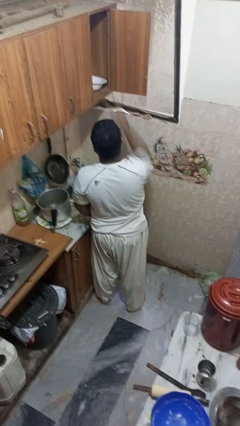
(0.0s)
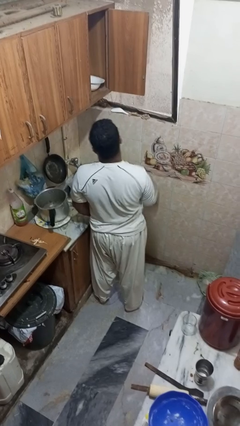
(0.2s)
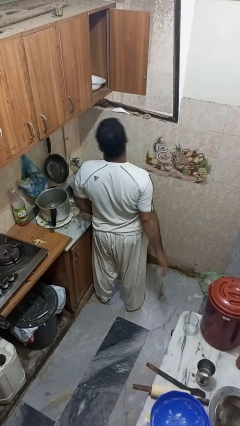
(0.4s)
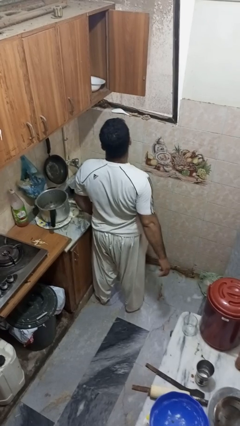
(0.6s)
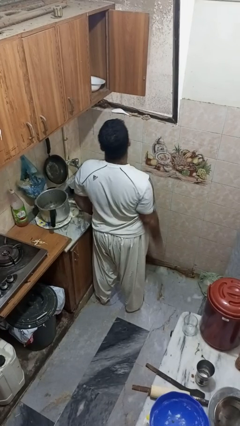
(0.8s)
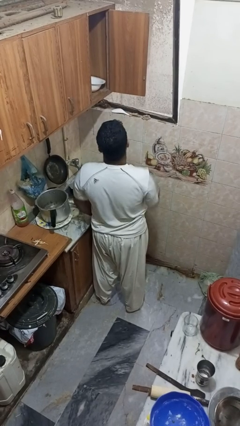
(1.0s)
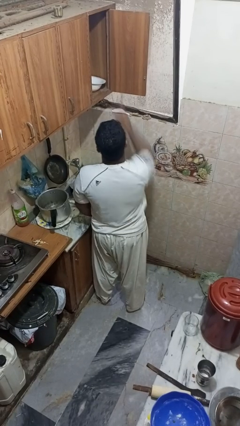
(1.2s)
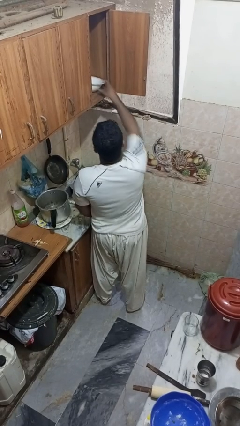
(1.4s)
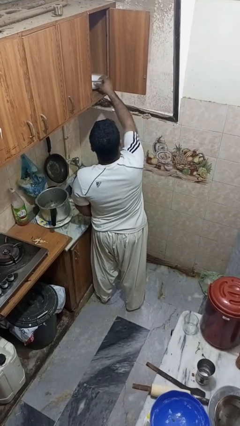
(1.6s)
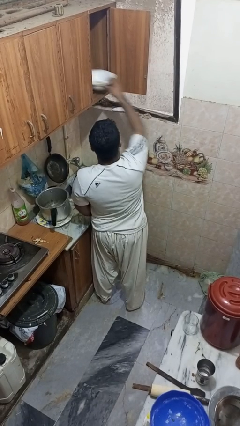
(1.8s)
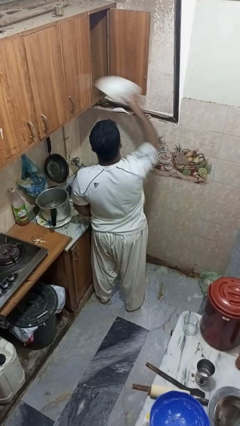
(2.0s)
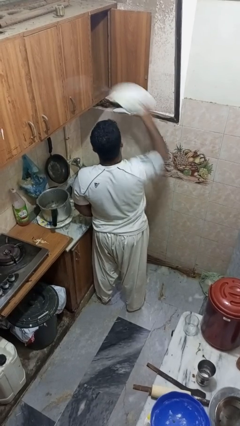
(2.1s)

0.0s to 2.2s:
person takes object from cabinet

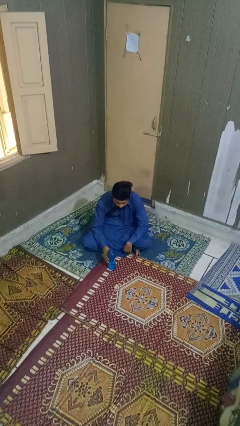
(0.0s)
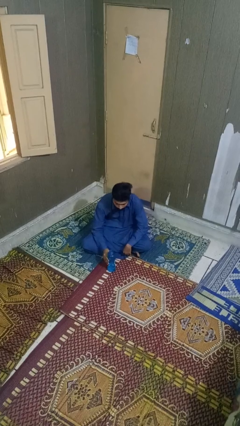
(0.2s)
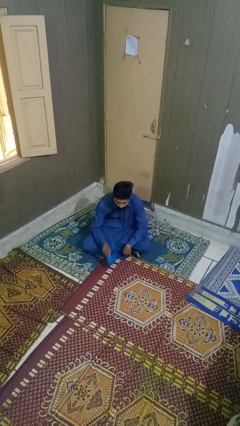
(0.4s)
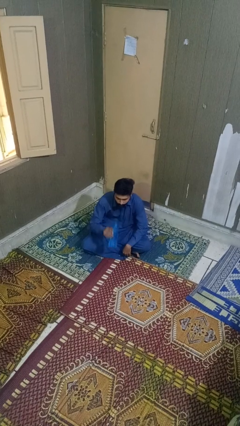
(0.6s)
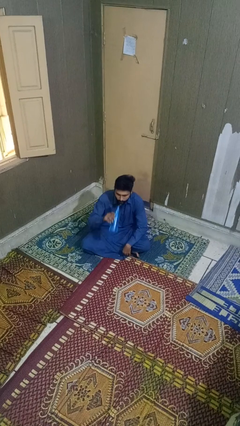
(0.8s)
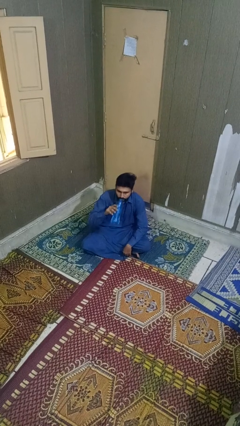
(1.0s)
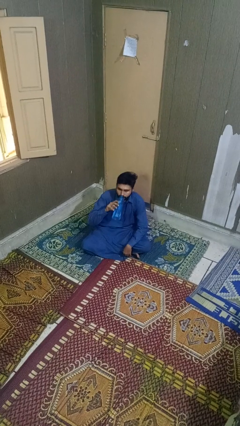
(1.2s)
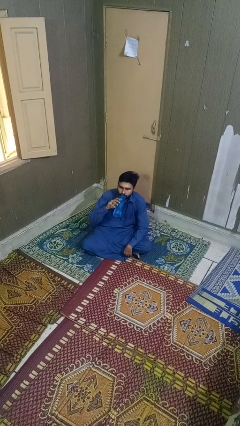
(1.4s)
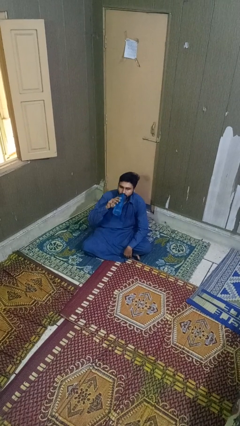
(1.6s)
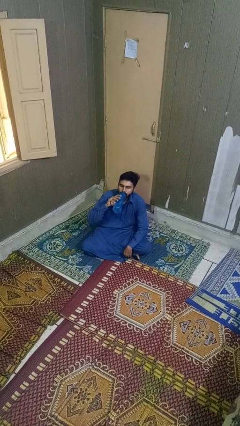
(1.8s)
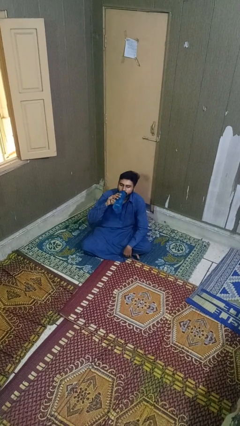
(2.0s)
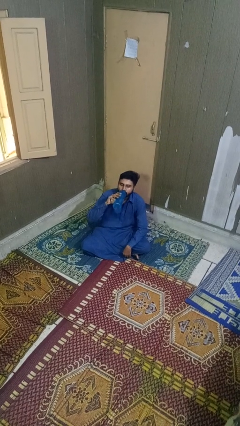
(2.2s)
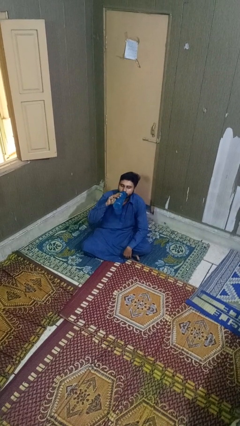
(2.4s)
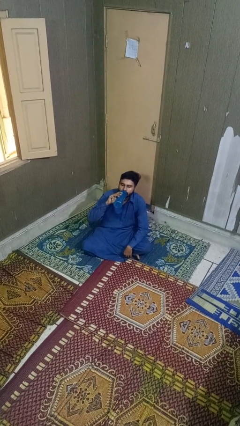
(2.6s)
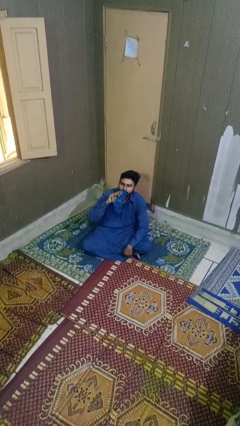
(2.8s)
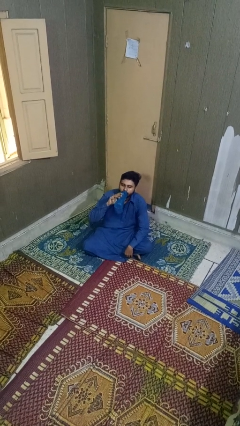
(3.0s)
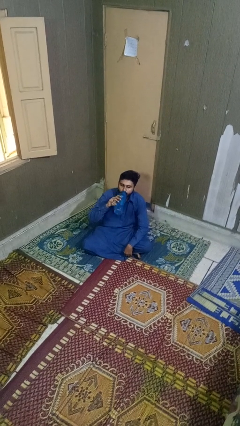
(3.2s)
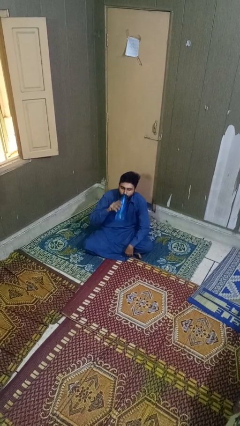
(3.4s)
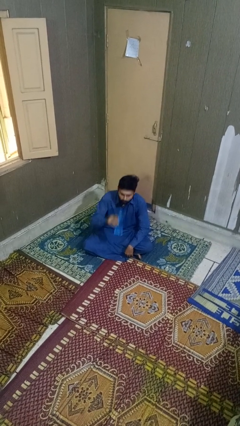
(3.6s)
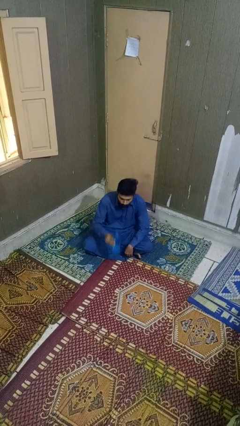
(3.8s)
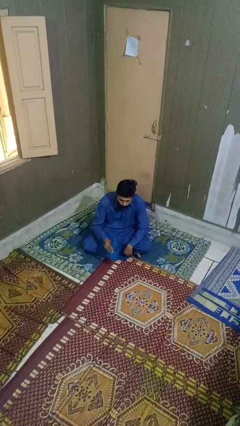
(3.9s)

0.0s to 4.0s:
person drinks from bottle

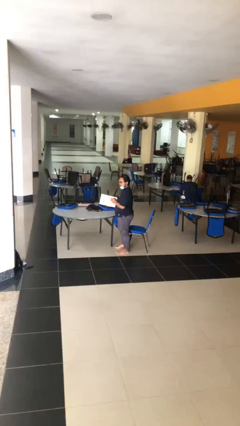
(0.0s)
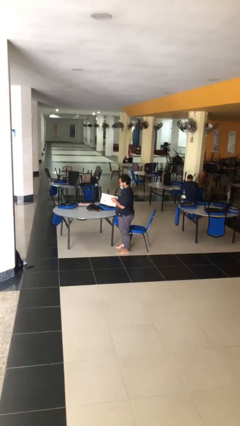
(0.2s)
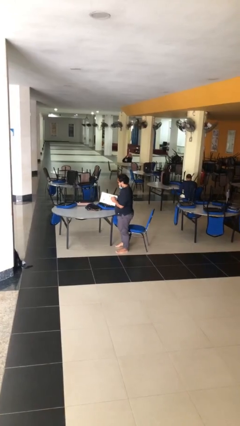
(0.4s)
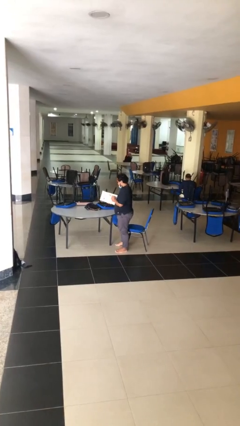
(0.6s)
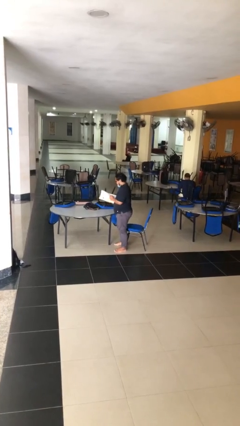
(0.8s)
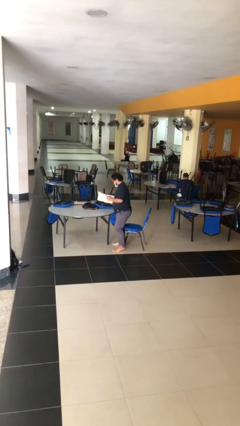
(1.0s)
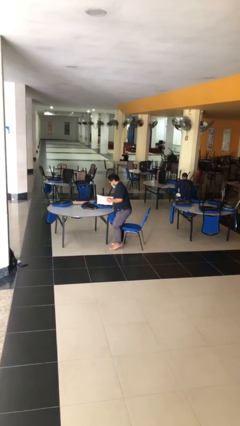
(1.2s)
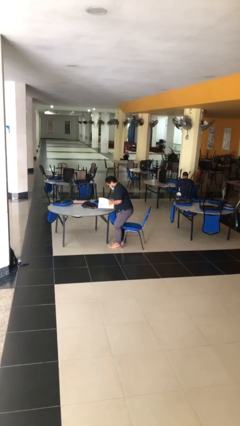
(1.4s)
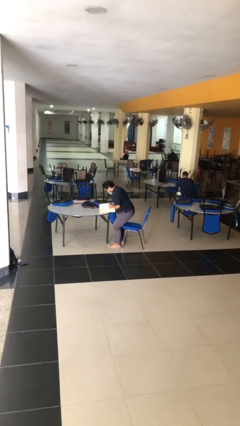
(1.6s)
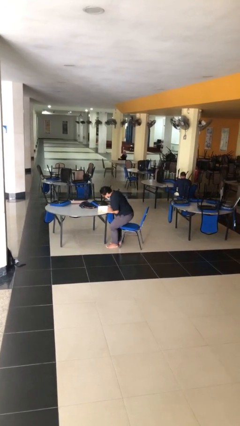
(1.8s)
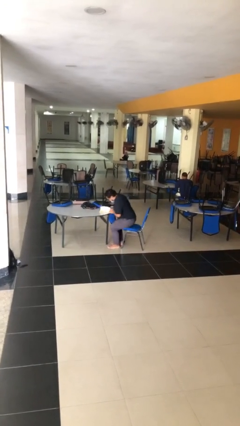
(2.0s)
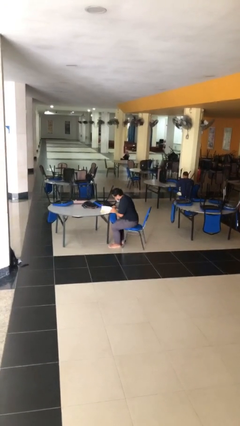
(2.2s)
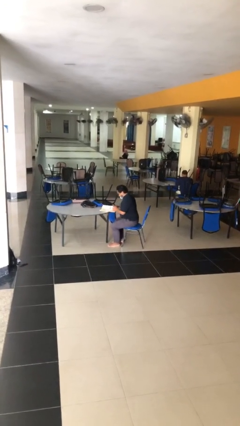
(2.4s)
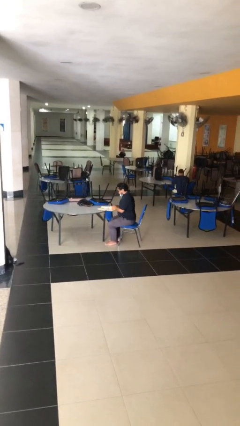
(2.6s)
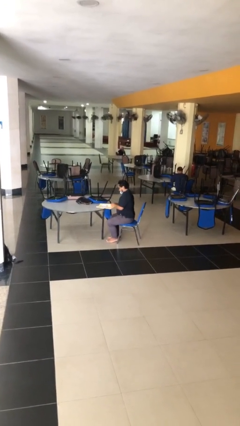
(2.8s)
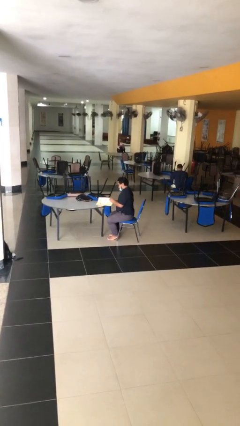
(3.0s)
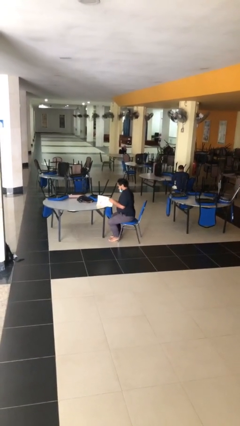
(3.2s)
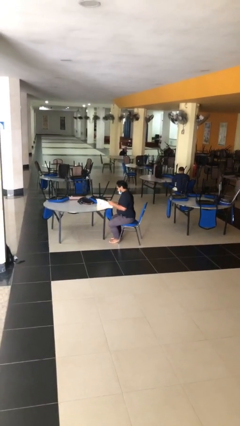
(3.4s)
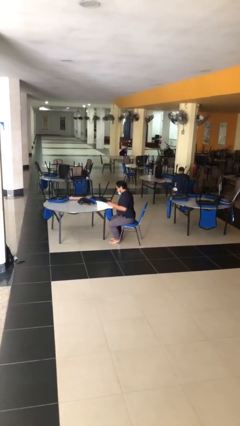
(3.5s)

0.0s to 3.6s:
person sits down

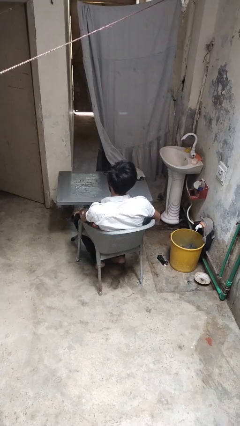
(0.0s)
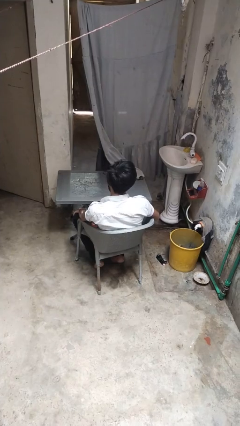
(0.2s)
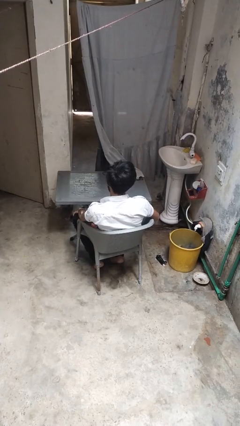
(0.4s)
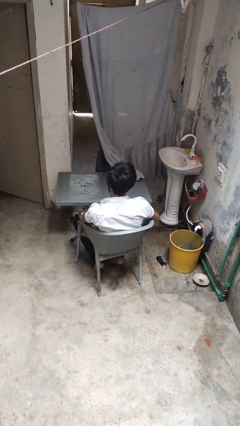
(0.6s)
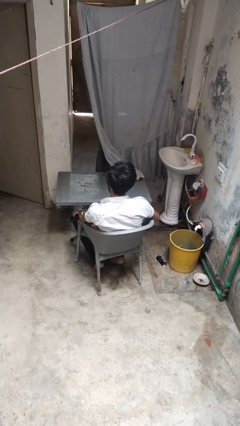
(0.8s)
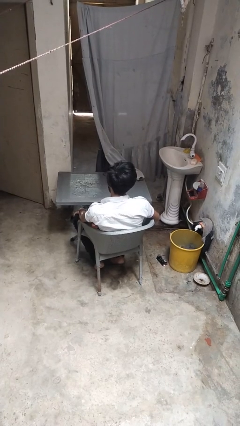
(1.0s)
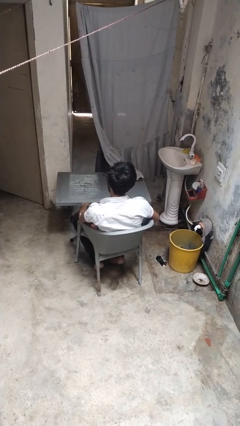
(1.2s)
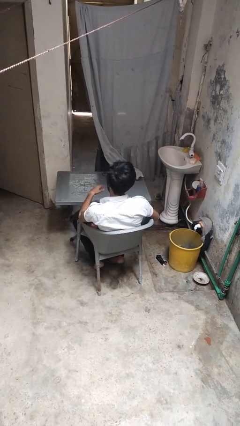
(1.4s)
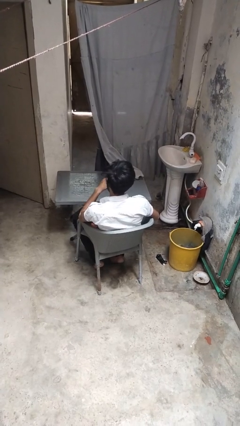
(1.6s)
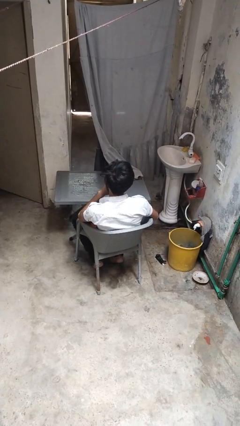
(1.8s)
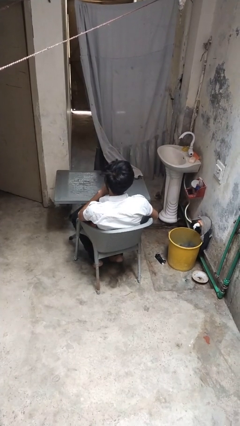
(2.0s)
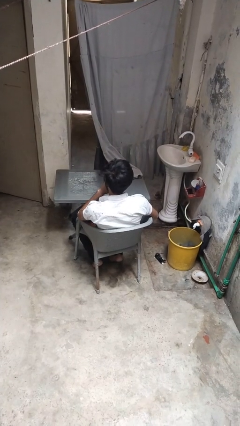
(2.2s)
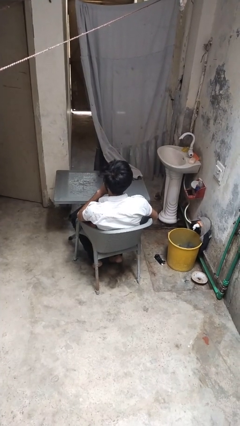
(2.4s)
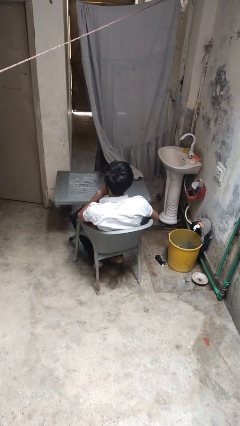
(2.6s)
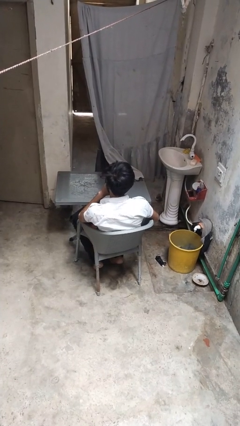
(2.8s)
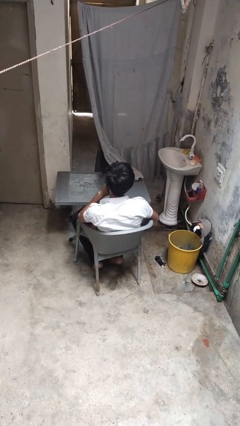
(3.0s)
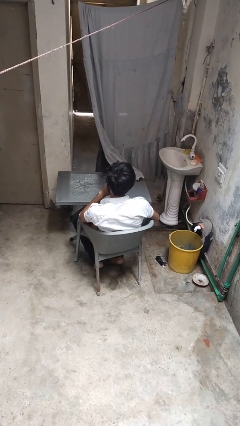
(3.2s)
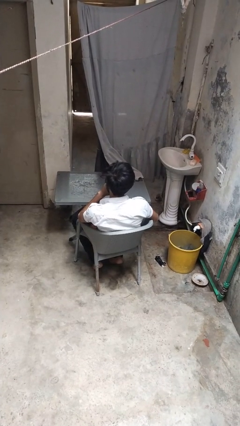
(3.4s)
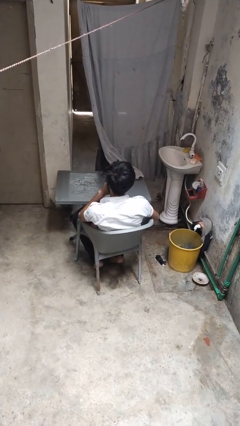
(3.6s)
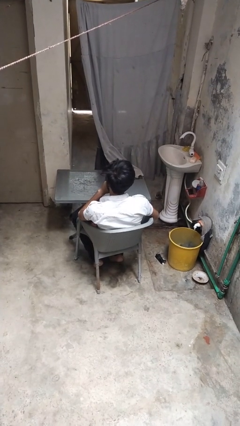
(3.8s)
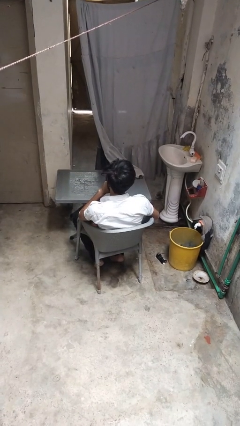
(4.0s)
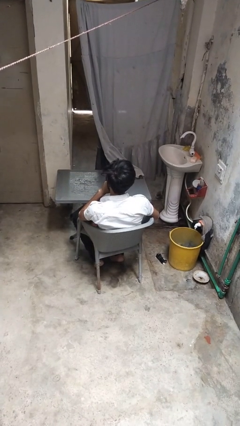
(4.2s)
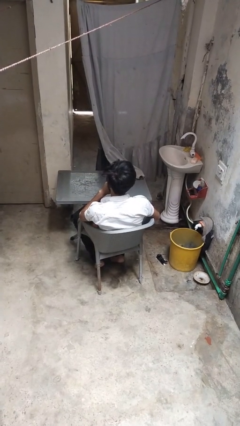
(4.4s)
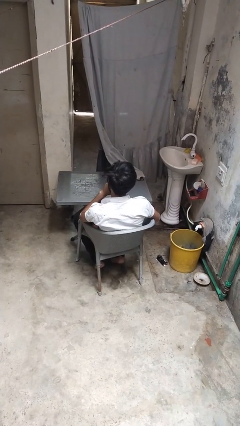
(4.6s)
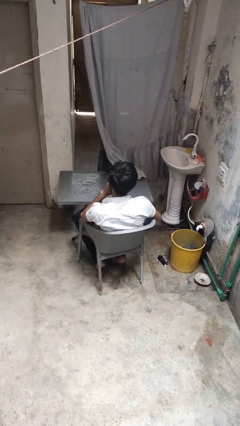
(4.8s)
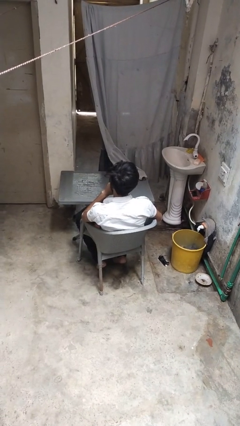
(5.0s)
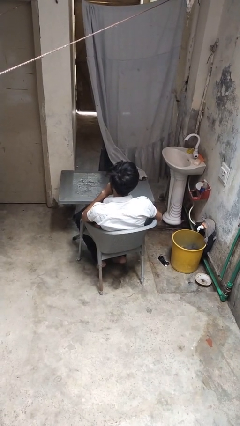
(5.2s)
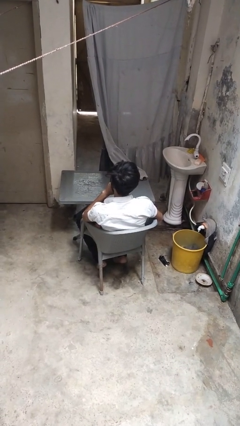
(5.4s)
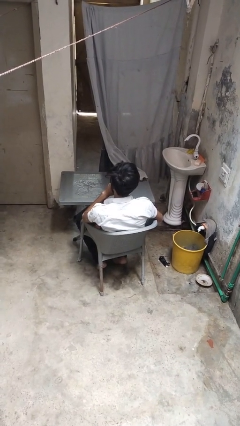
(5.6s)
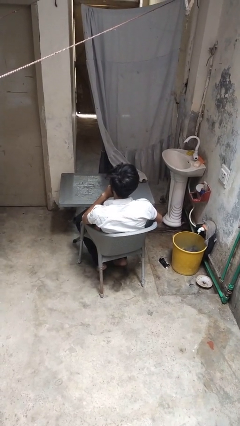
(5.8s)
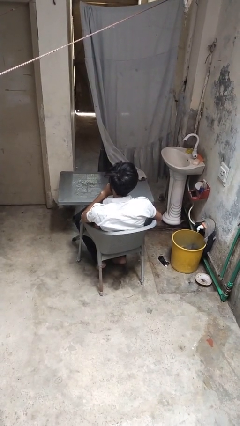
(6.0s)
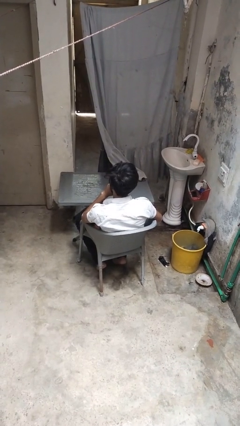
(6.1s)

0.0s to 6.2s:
person licks fingers

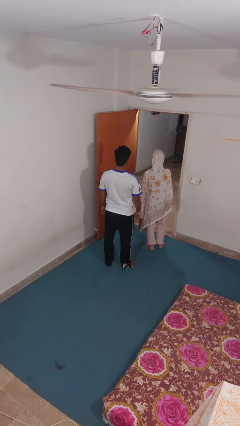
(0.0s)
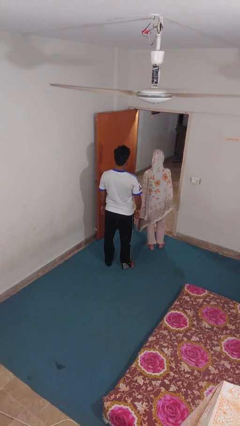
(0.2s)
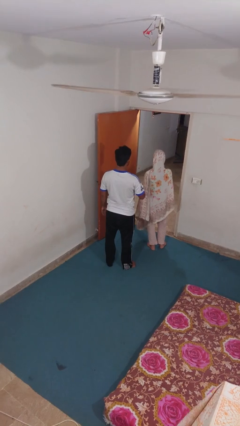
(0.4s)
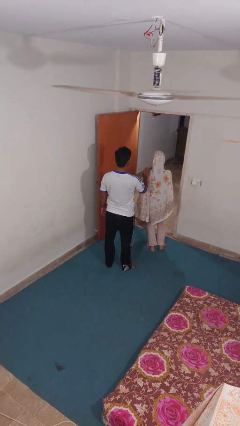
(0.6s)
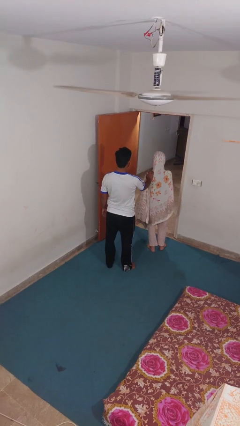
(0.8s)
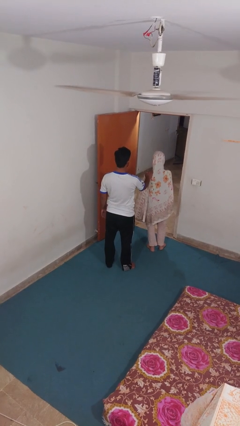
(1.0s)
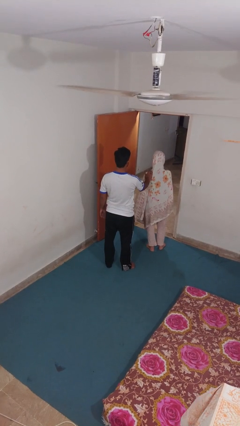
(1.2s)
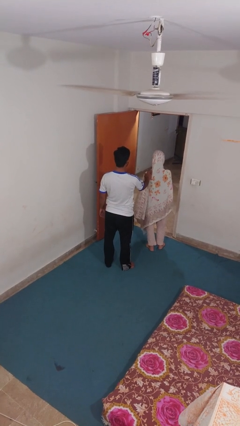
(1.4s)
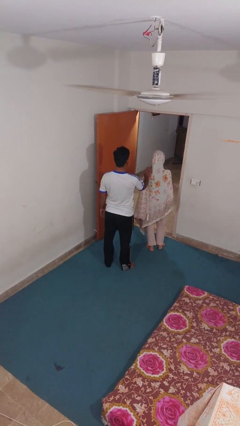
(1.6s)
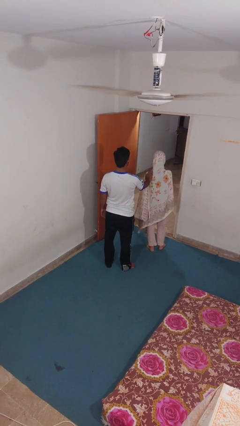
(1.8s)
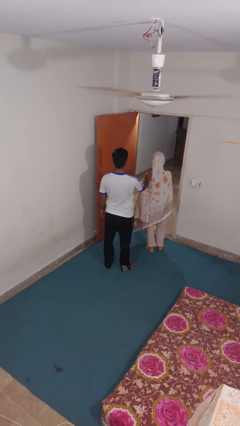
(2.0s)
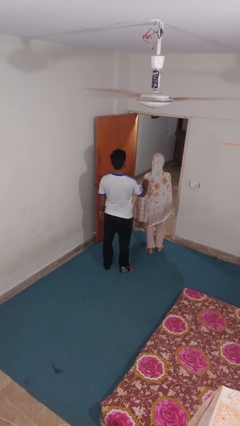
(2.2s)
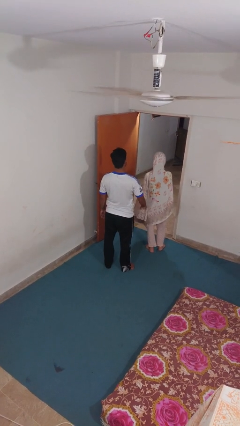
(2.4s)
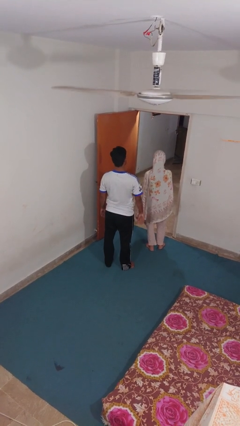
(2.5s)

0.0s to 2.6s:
person touches back of person
